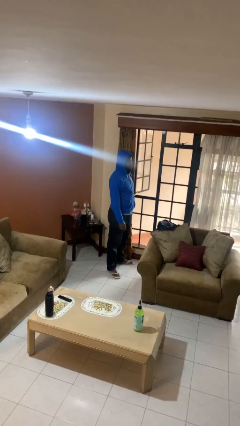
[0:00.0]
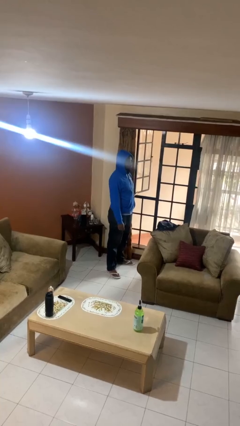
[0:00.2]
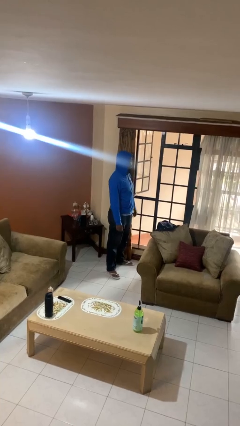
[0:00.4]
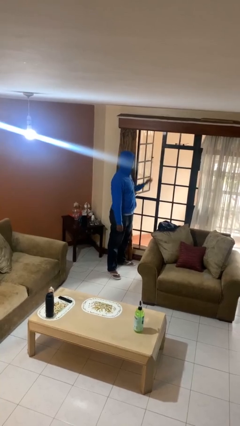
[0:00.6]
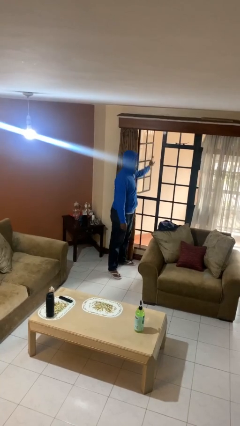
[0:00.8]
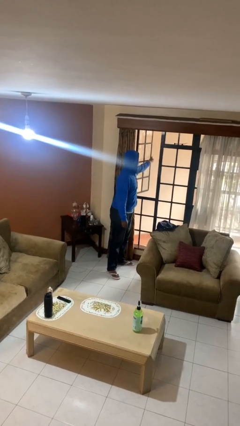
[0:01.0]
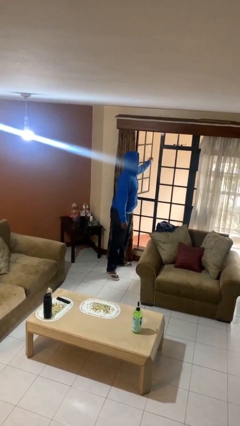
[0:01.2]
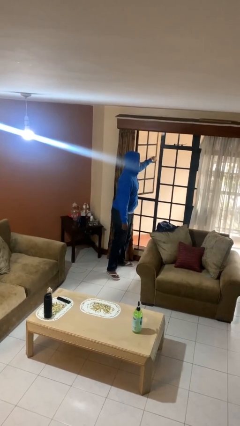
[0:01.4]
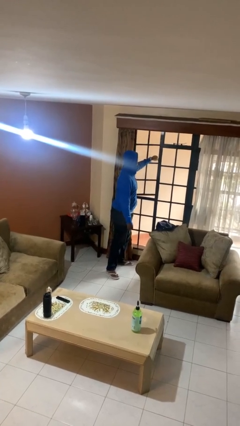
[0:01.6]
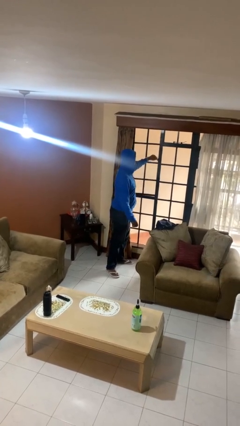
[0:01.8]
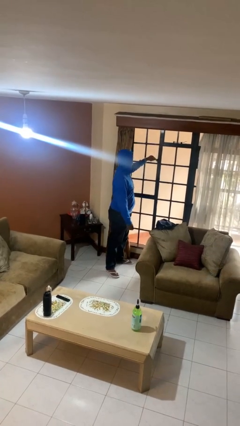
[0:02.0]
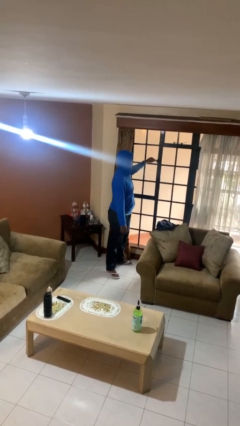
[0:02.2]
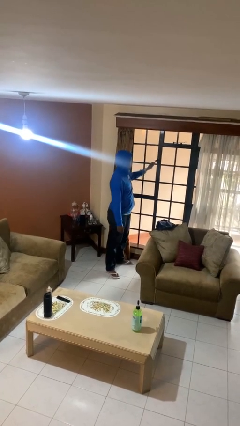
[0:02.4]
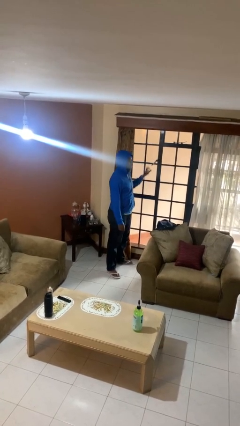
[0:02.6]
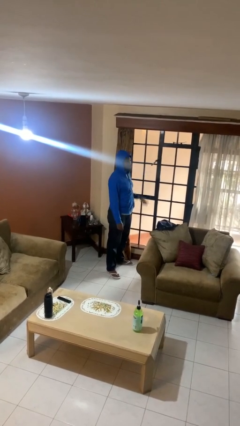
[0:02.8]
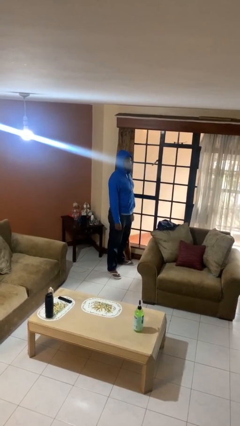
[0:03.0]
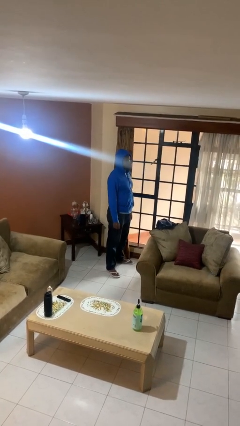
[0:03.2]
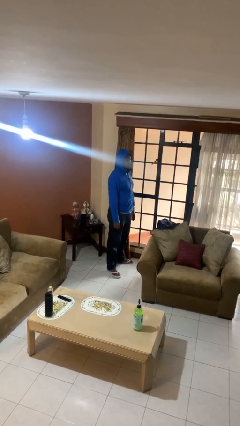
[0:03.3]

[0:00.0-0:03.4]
person closes home window

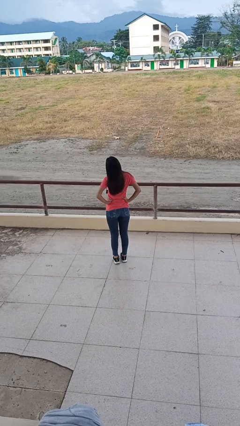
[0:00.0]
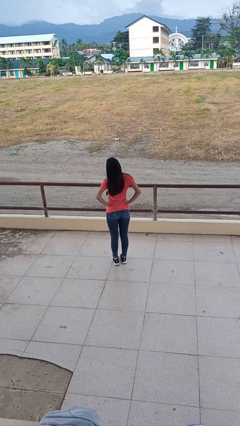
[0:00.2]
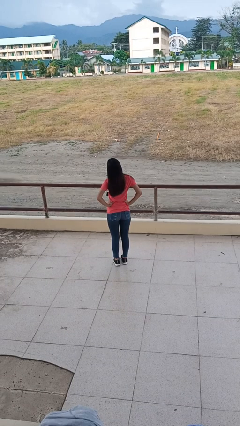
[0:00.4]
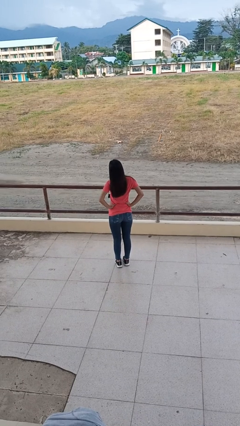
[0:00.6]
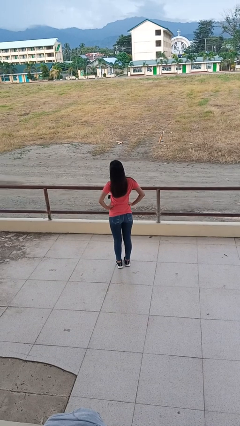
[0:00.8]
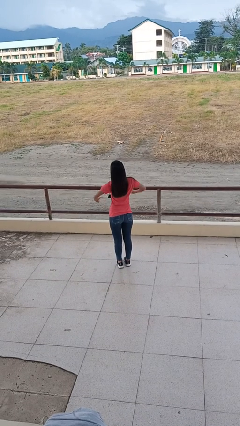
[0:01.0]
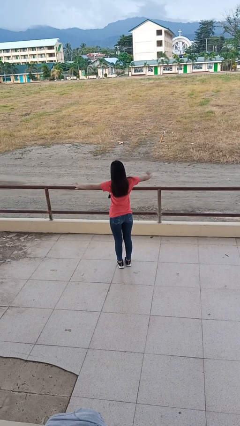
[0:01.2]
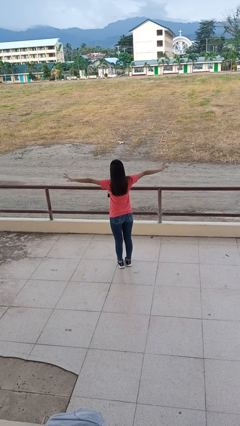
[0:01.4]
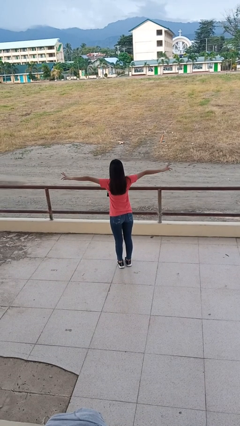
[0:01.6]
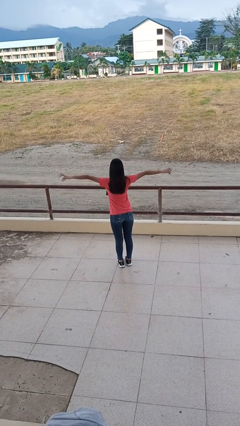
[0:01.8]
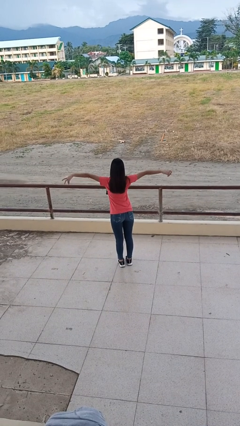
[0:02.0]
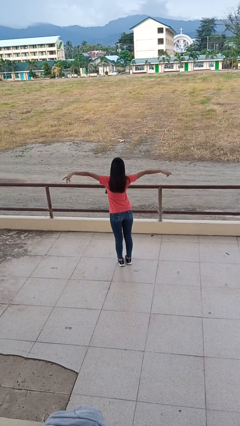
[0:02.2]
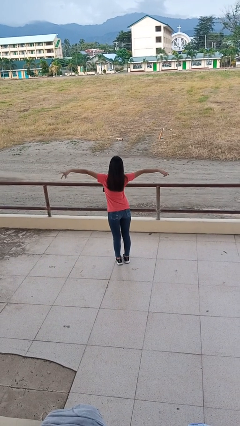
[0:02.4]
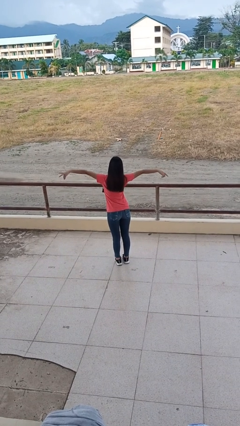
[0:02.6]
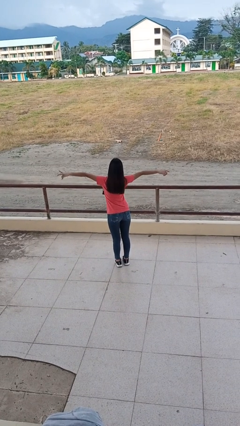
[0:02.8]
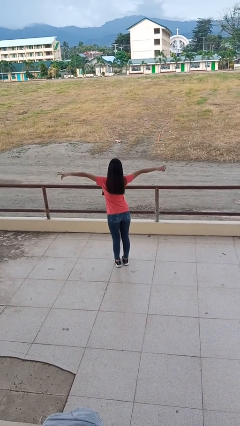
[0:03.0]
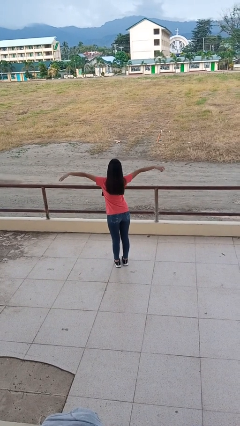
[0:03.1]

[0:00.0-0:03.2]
person stretches arms to side

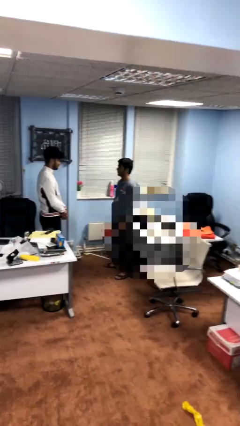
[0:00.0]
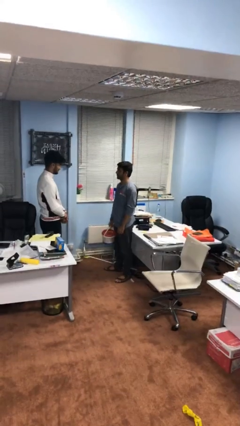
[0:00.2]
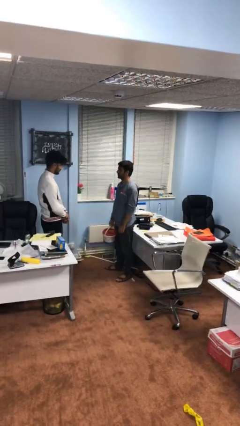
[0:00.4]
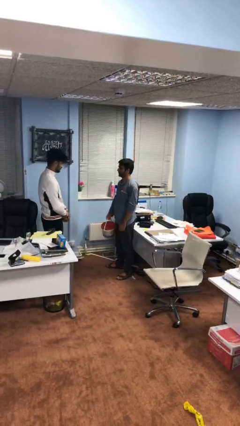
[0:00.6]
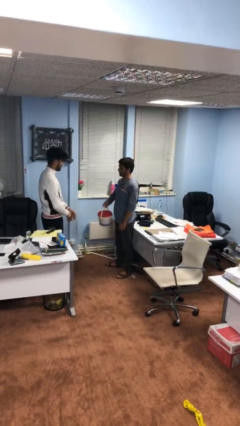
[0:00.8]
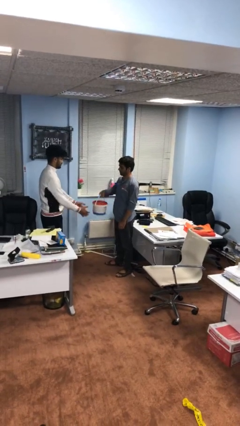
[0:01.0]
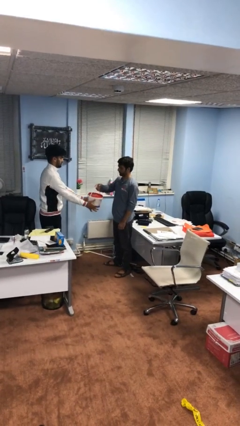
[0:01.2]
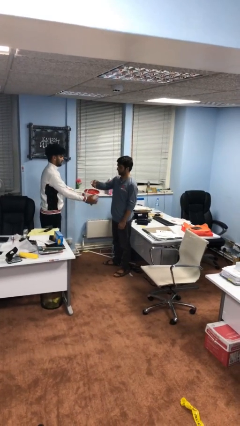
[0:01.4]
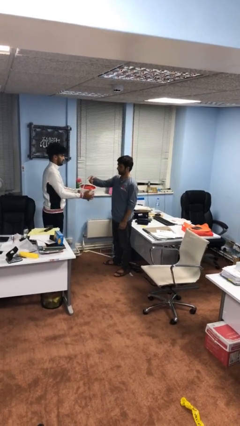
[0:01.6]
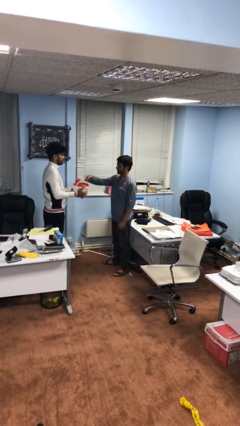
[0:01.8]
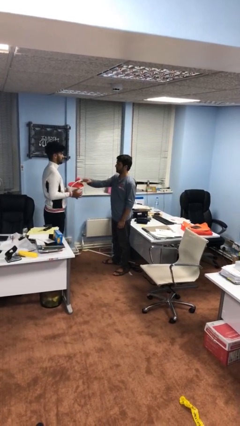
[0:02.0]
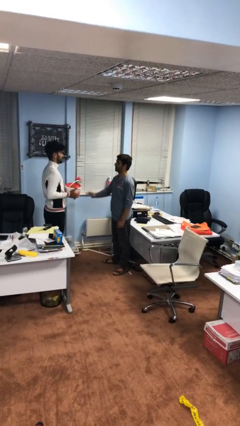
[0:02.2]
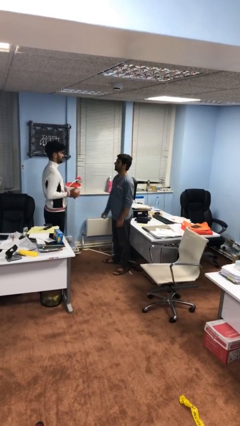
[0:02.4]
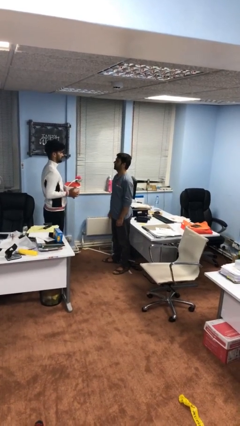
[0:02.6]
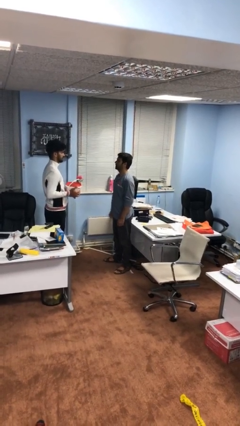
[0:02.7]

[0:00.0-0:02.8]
person transfers object to person

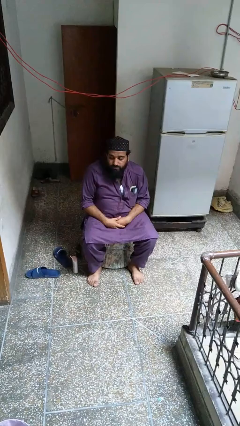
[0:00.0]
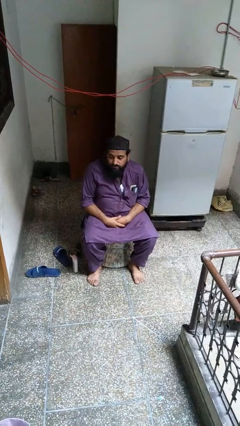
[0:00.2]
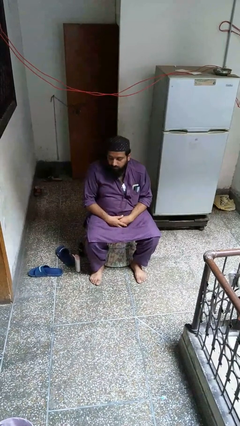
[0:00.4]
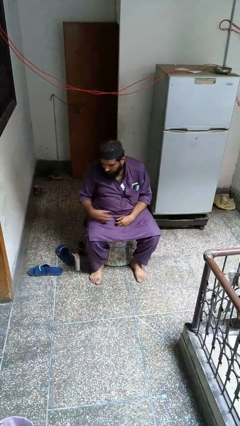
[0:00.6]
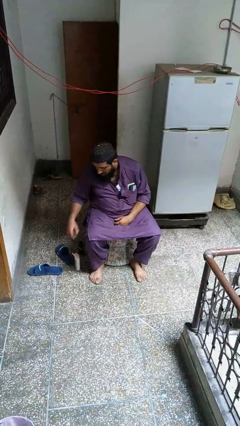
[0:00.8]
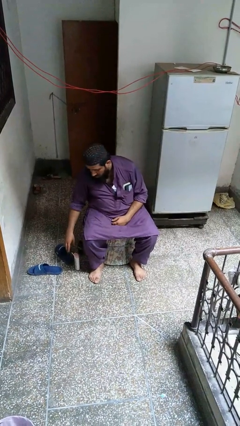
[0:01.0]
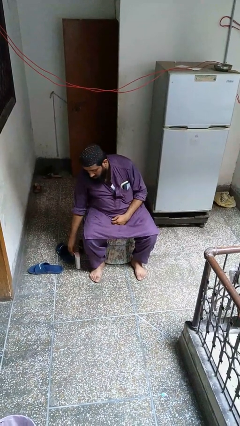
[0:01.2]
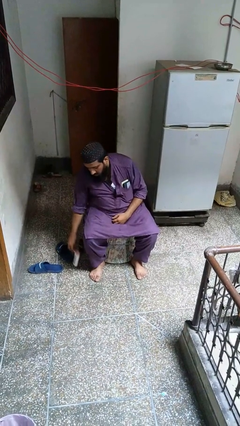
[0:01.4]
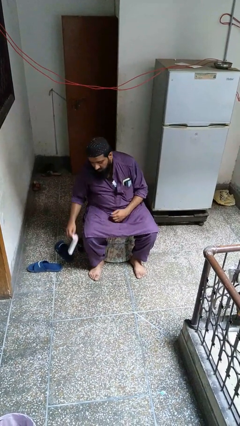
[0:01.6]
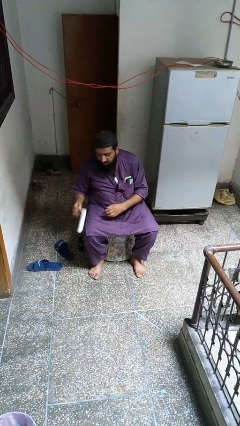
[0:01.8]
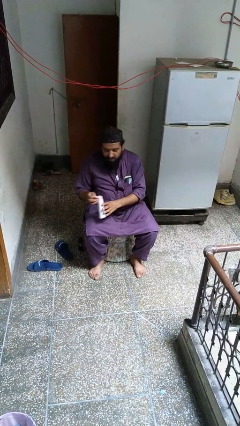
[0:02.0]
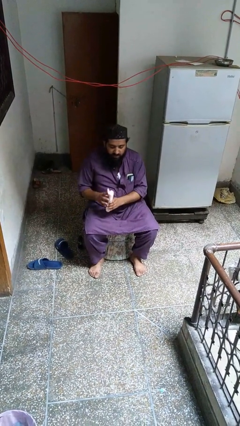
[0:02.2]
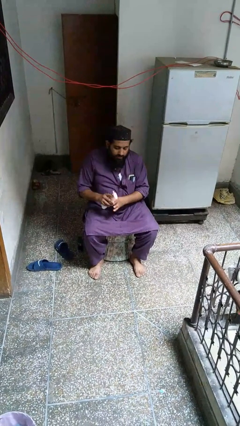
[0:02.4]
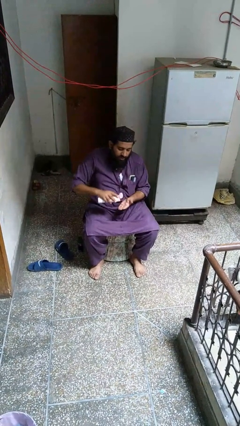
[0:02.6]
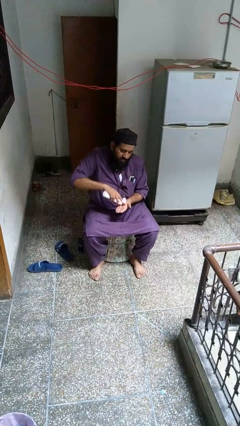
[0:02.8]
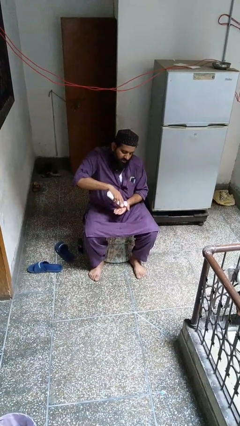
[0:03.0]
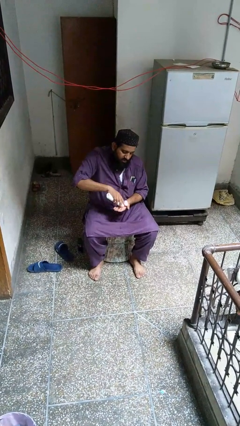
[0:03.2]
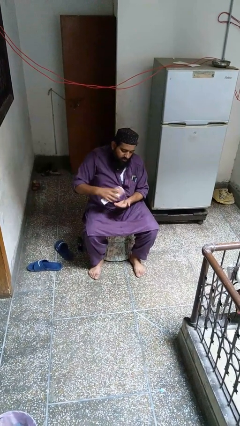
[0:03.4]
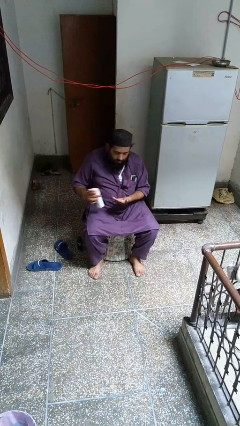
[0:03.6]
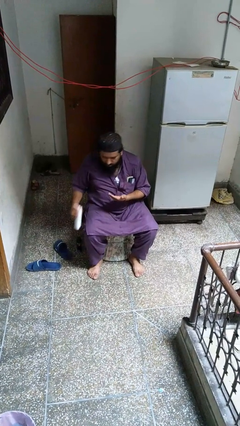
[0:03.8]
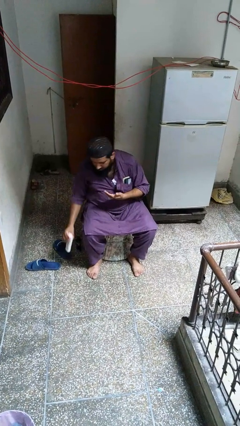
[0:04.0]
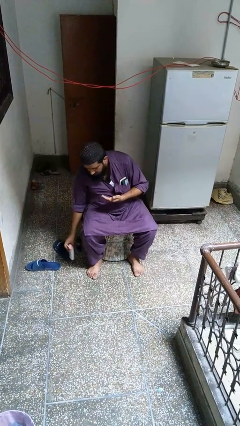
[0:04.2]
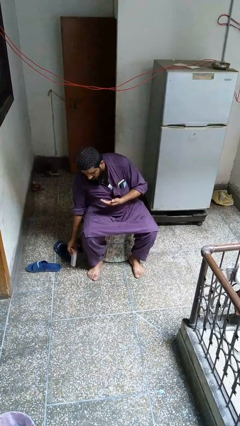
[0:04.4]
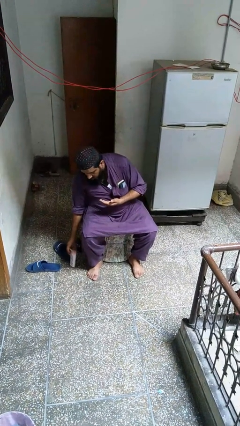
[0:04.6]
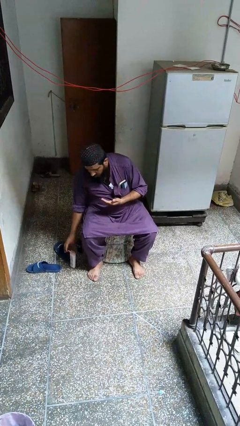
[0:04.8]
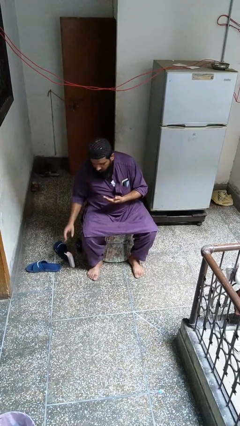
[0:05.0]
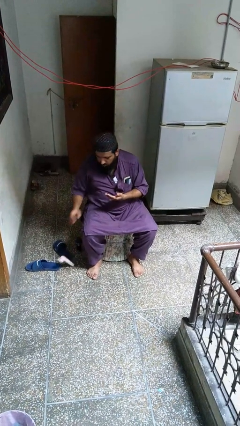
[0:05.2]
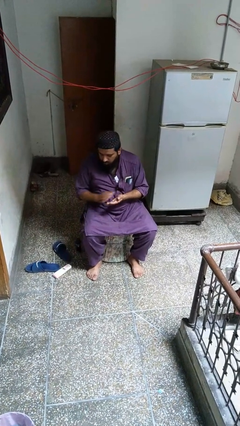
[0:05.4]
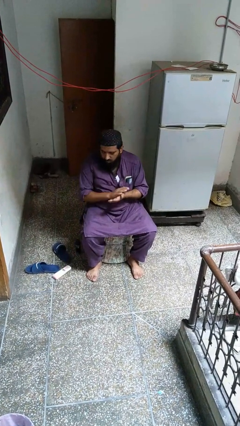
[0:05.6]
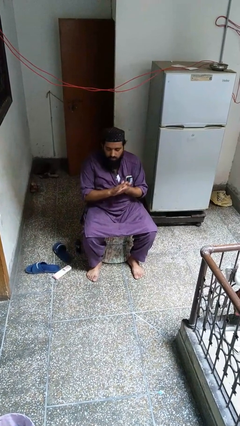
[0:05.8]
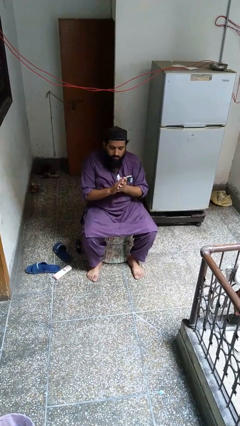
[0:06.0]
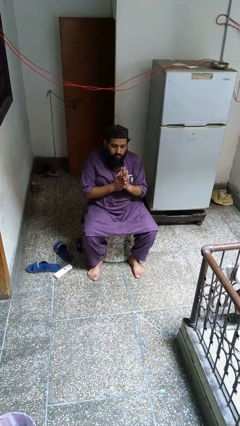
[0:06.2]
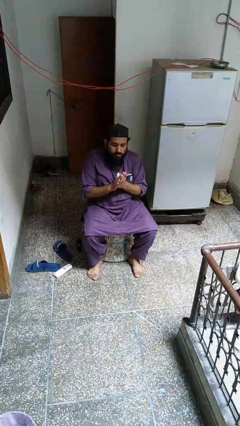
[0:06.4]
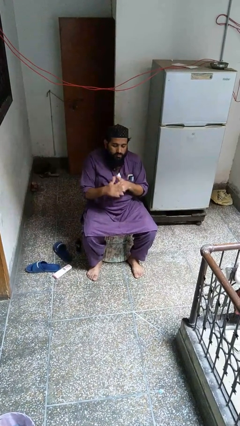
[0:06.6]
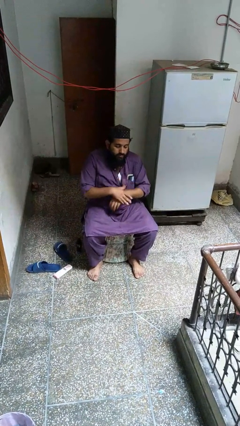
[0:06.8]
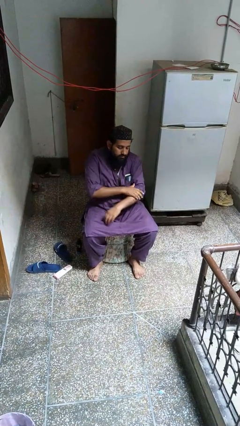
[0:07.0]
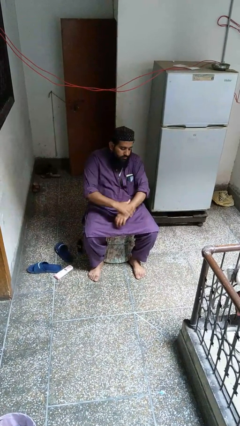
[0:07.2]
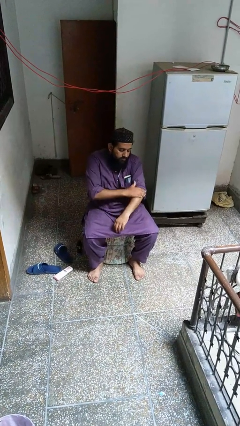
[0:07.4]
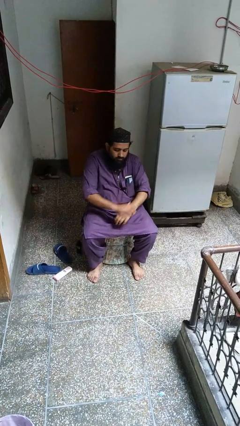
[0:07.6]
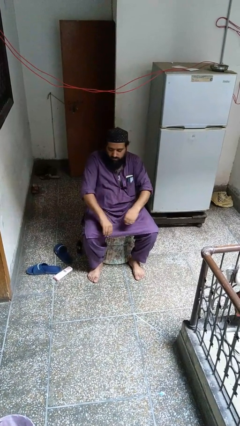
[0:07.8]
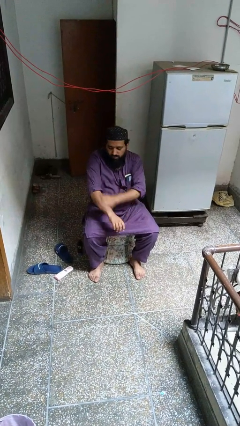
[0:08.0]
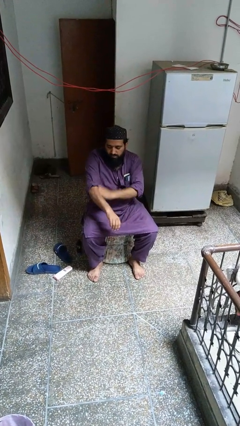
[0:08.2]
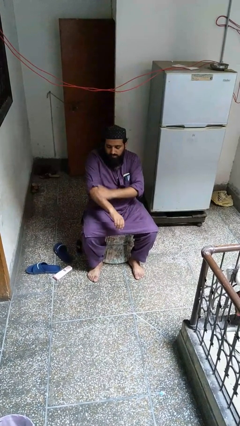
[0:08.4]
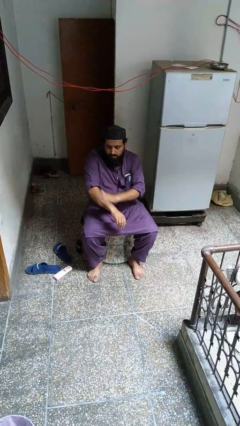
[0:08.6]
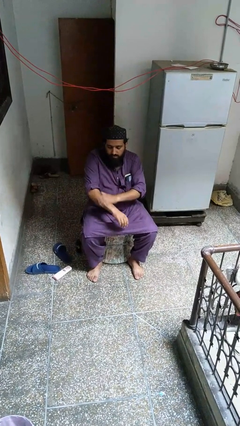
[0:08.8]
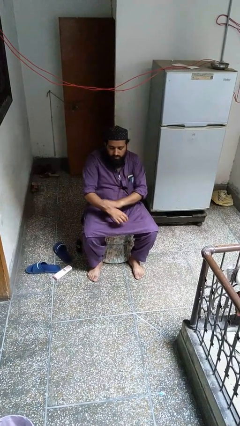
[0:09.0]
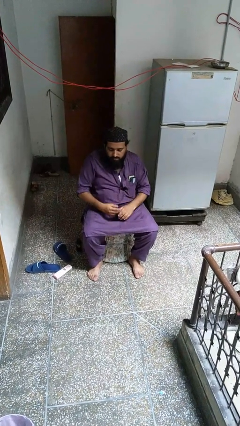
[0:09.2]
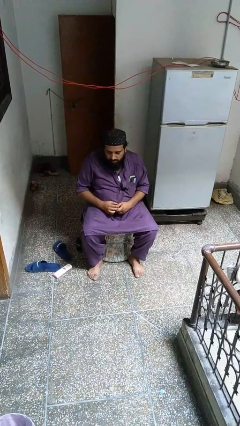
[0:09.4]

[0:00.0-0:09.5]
person applies facial moisturizer
